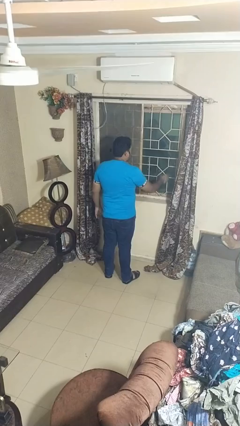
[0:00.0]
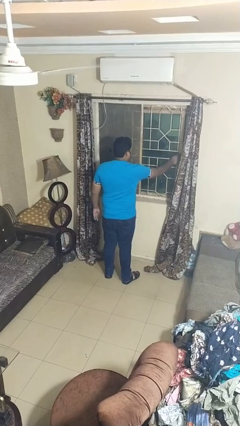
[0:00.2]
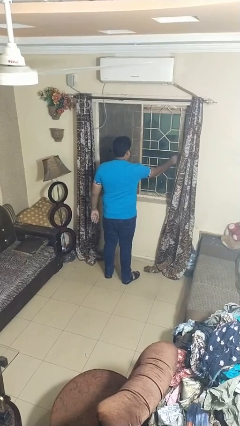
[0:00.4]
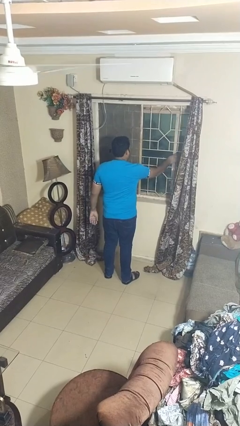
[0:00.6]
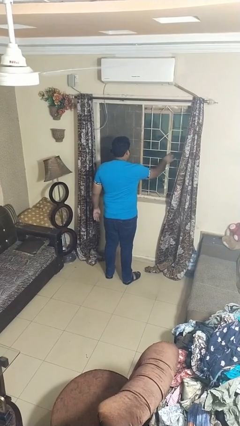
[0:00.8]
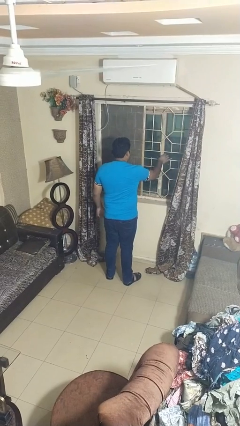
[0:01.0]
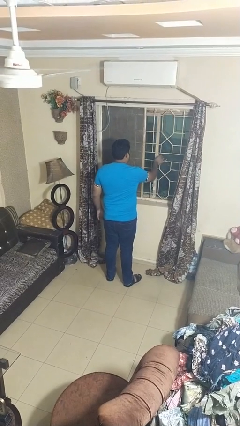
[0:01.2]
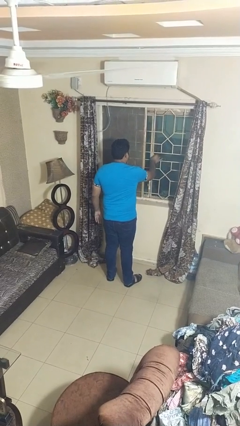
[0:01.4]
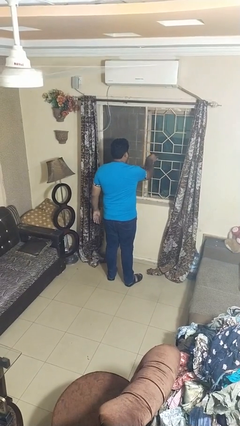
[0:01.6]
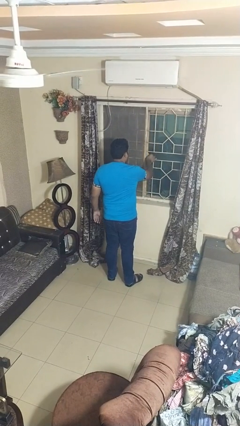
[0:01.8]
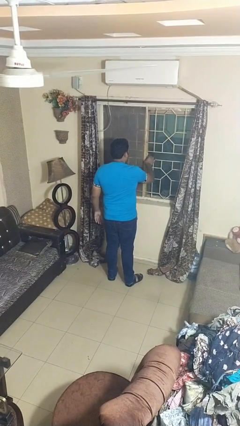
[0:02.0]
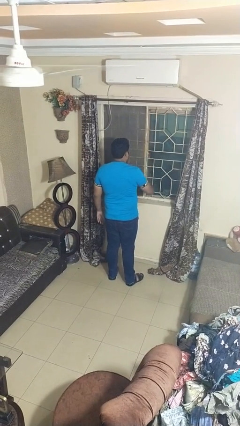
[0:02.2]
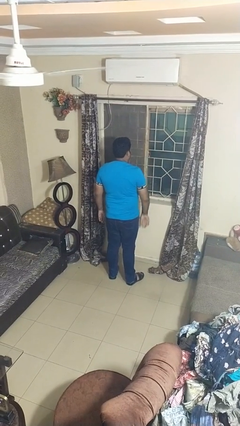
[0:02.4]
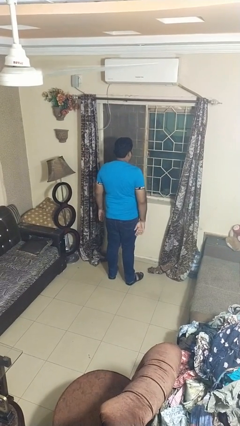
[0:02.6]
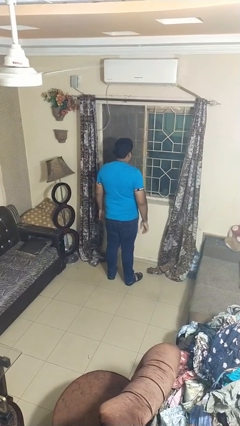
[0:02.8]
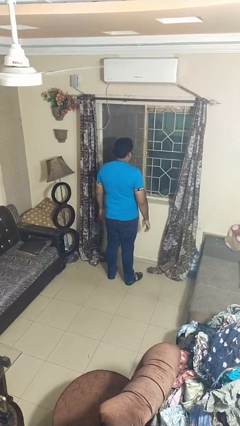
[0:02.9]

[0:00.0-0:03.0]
person closes home window

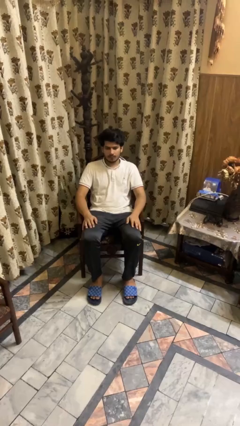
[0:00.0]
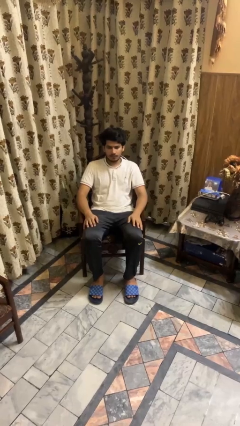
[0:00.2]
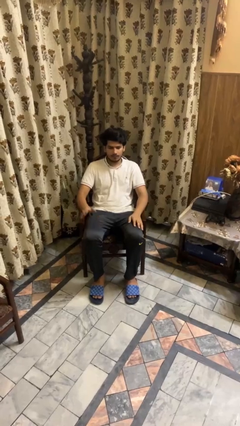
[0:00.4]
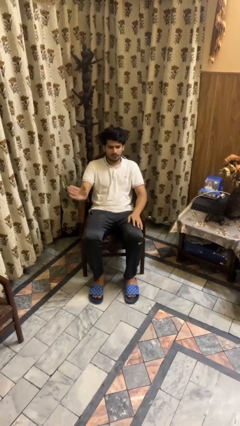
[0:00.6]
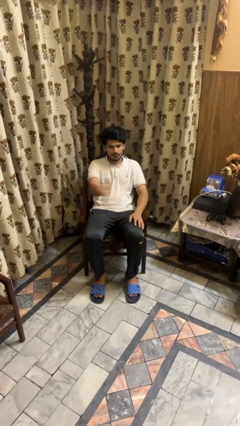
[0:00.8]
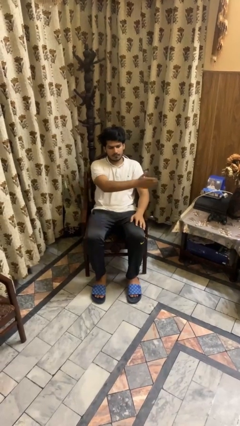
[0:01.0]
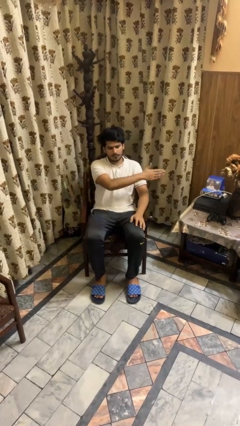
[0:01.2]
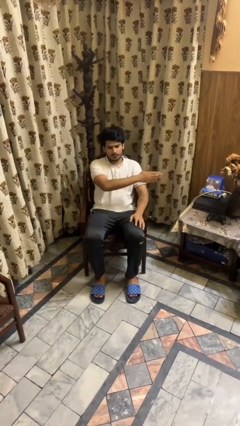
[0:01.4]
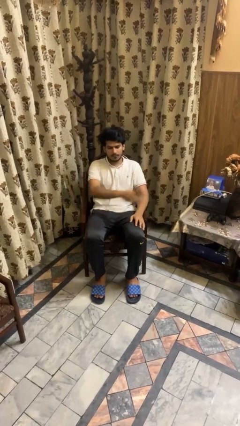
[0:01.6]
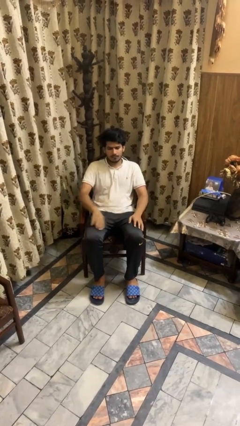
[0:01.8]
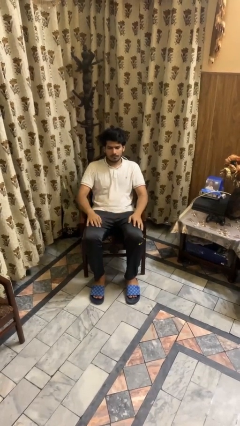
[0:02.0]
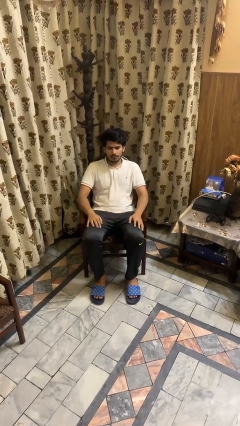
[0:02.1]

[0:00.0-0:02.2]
person gestures swipe left

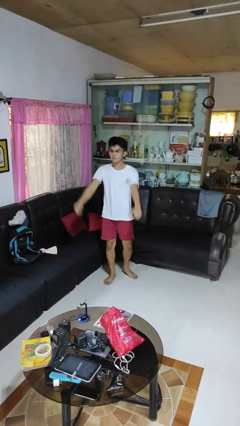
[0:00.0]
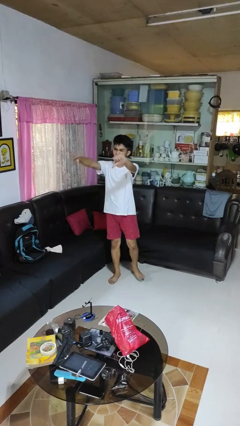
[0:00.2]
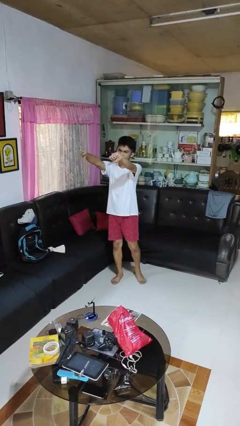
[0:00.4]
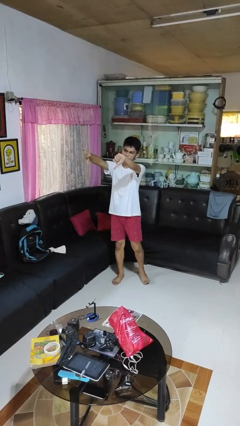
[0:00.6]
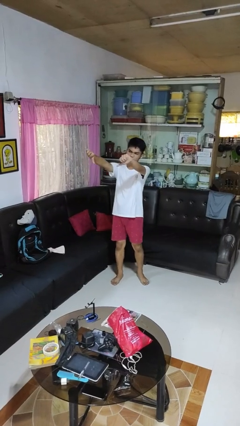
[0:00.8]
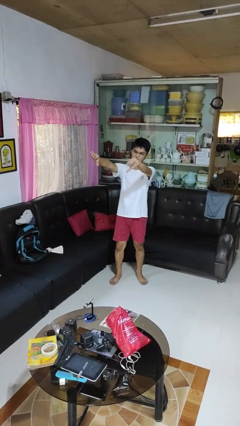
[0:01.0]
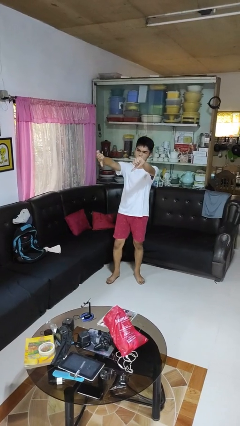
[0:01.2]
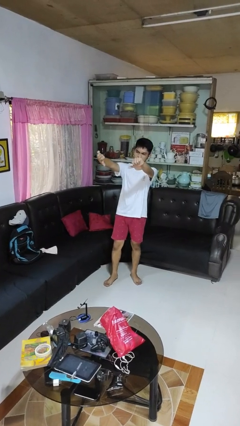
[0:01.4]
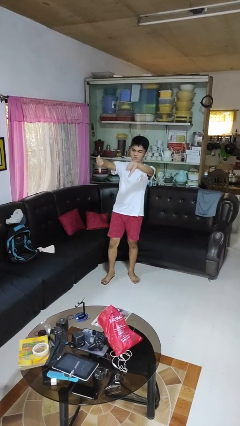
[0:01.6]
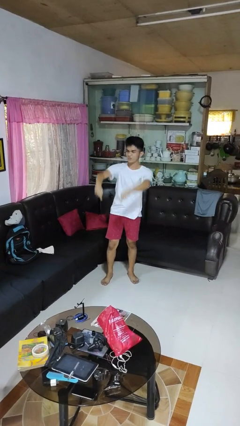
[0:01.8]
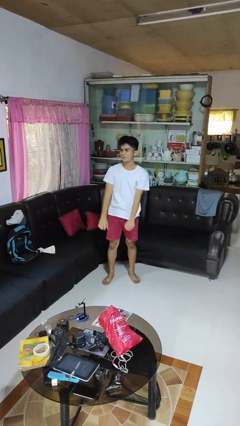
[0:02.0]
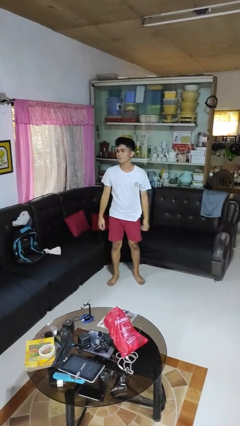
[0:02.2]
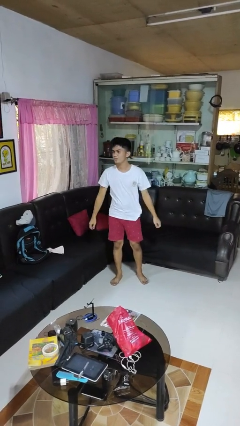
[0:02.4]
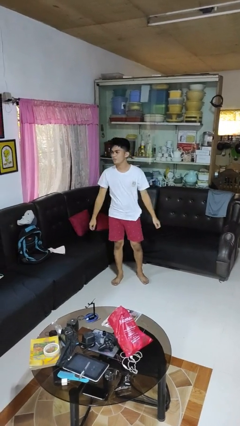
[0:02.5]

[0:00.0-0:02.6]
person gestures thumbs down

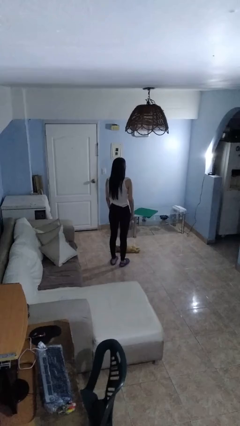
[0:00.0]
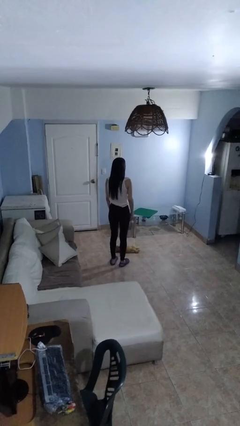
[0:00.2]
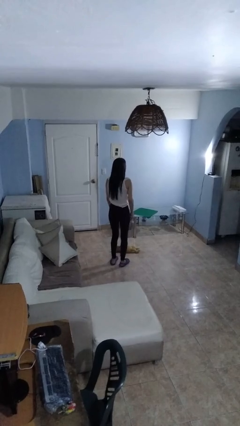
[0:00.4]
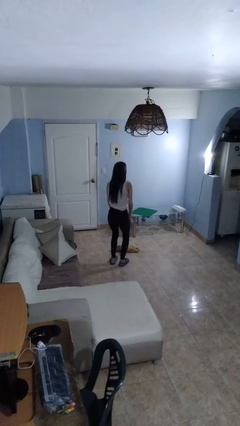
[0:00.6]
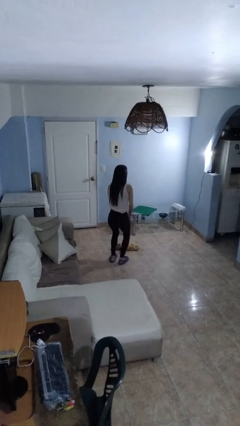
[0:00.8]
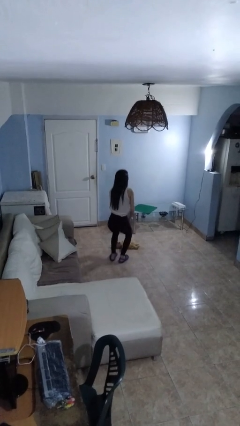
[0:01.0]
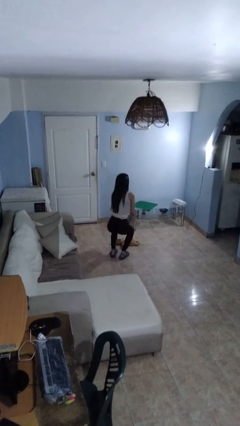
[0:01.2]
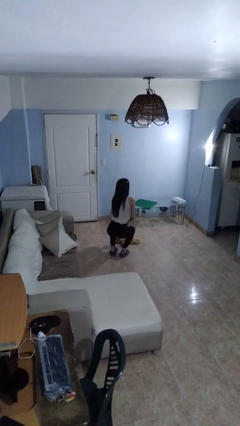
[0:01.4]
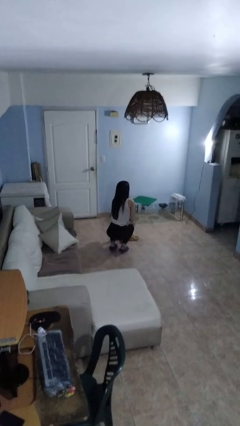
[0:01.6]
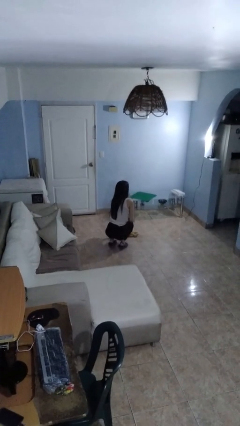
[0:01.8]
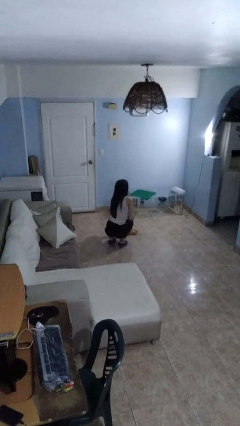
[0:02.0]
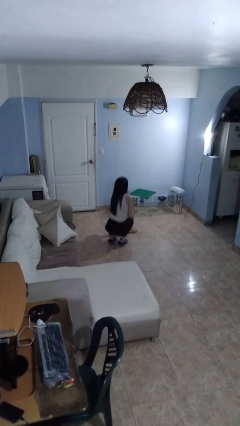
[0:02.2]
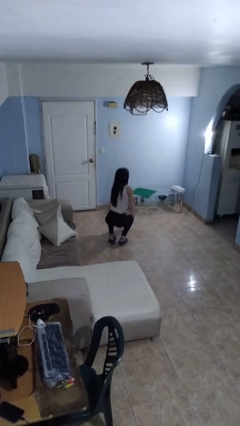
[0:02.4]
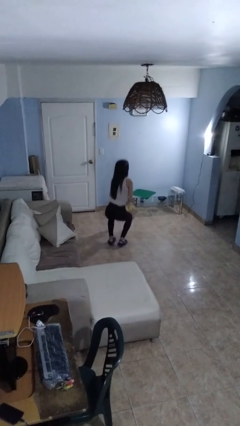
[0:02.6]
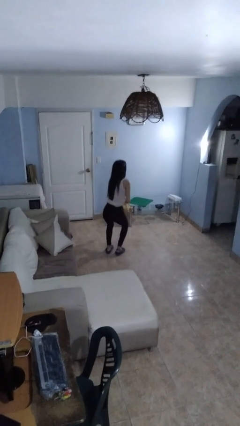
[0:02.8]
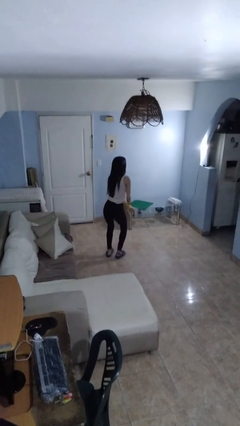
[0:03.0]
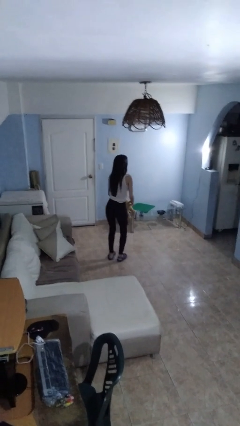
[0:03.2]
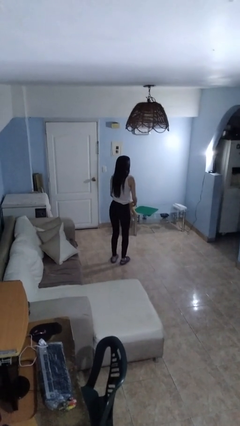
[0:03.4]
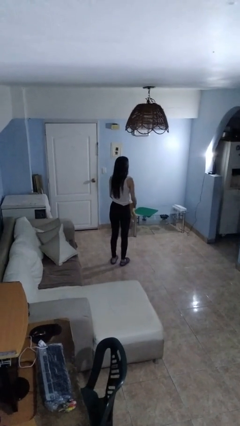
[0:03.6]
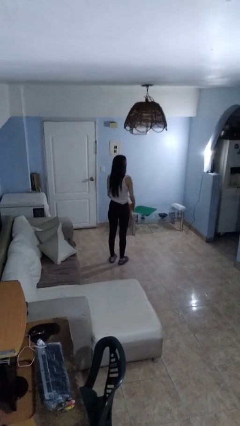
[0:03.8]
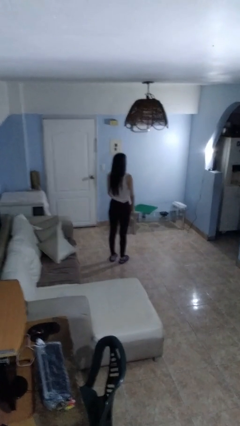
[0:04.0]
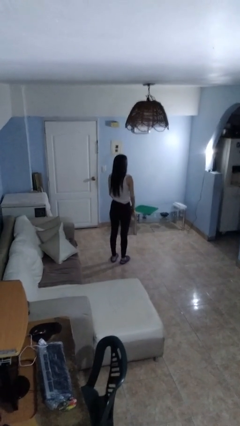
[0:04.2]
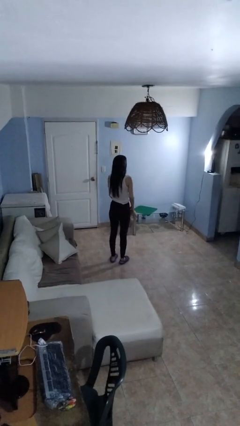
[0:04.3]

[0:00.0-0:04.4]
person picks up object from floor

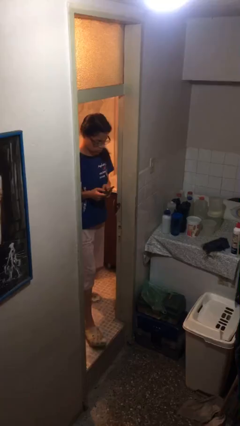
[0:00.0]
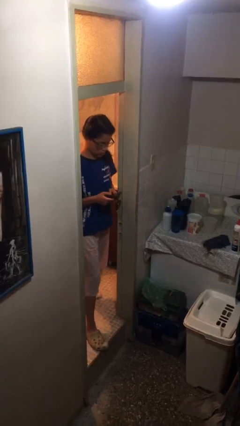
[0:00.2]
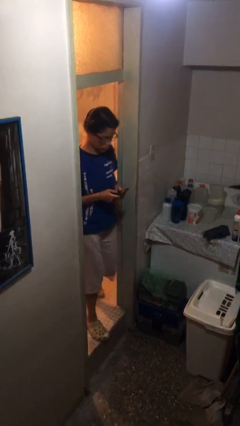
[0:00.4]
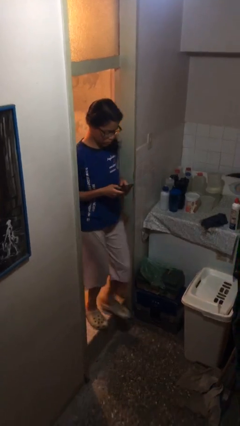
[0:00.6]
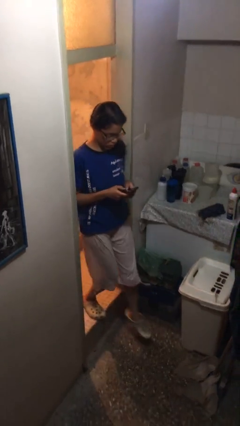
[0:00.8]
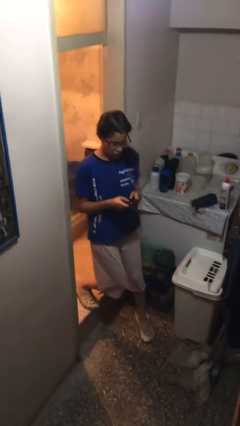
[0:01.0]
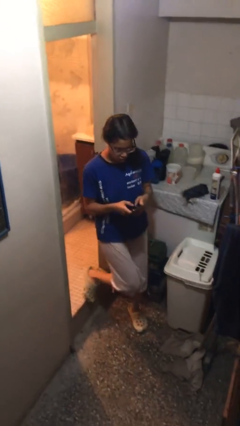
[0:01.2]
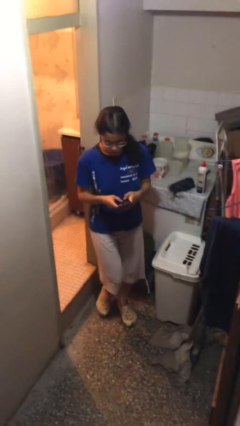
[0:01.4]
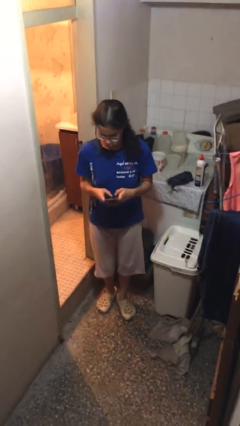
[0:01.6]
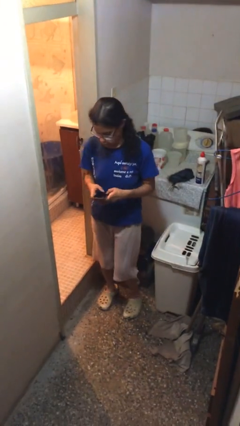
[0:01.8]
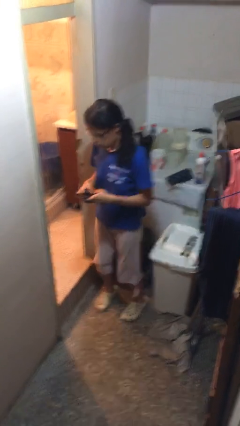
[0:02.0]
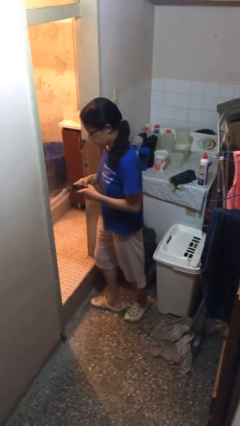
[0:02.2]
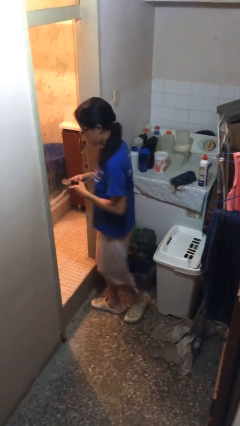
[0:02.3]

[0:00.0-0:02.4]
person enters scene through structure

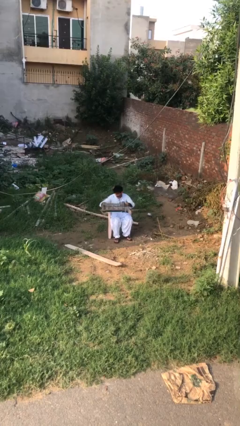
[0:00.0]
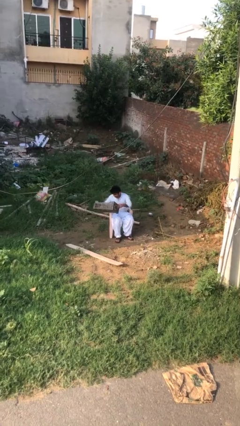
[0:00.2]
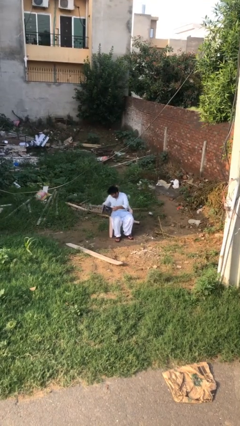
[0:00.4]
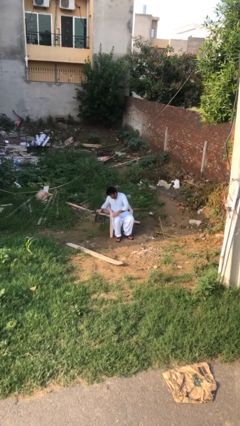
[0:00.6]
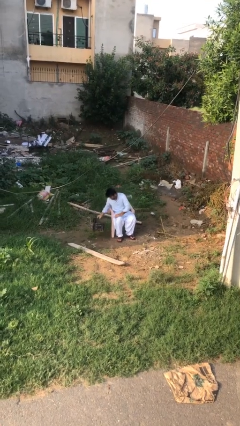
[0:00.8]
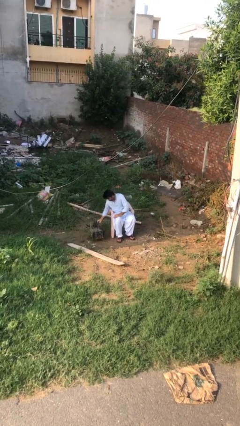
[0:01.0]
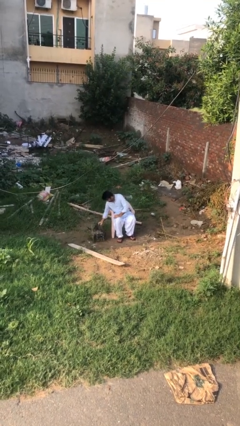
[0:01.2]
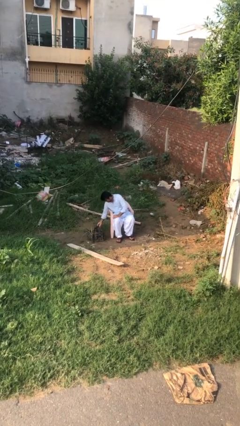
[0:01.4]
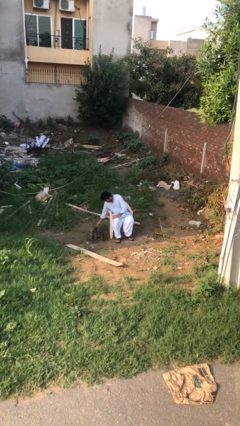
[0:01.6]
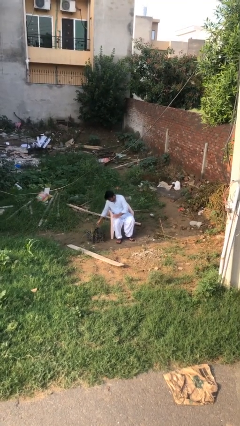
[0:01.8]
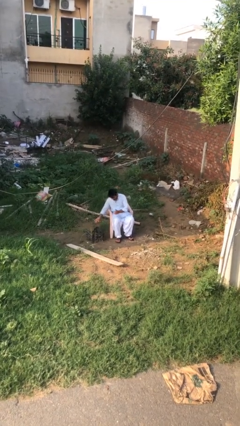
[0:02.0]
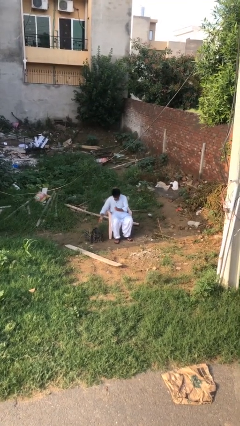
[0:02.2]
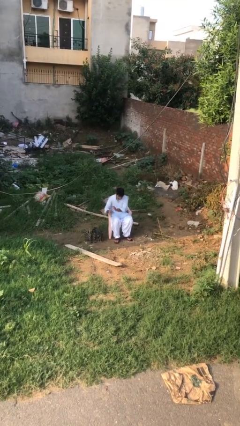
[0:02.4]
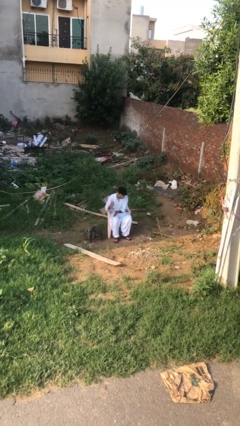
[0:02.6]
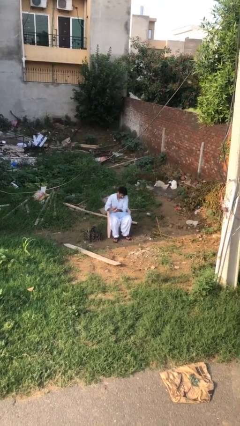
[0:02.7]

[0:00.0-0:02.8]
person puts down object on floor
